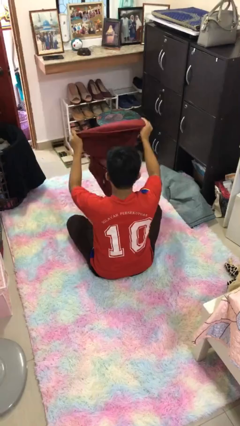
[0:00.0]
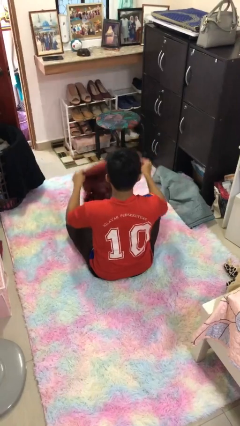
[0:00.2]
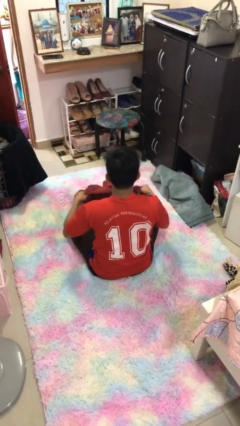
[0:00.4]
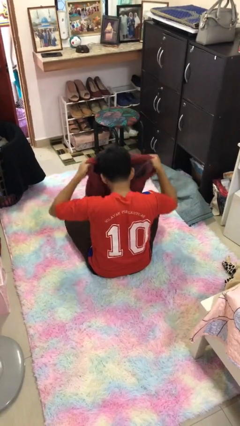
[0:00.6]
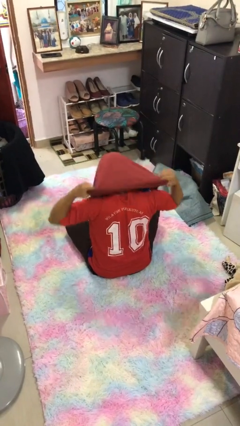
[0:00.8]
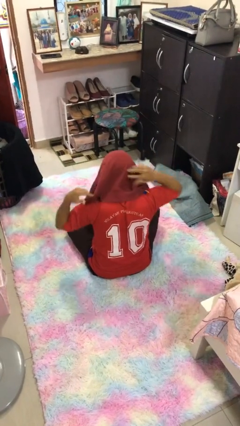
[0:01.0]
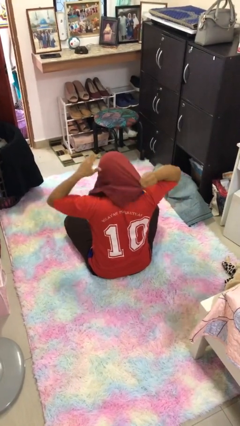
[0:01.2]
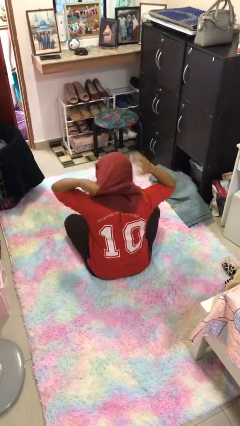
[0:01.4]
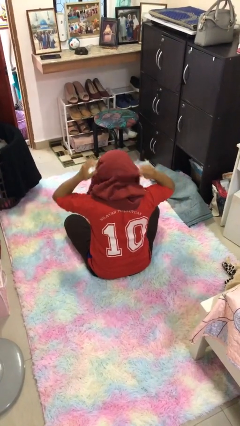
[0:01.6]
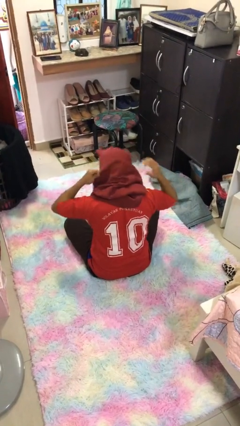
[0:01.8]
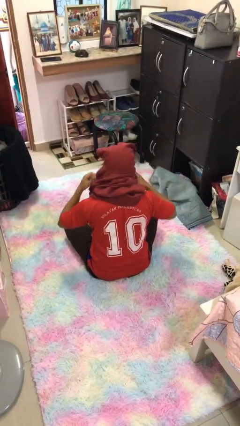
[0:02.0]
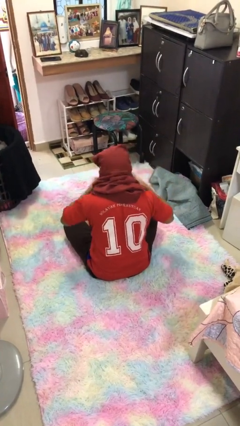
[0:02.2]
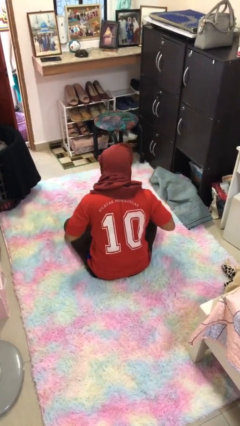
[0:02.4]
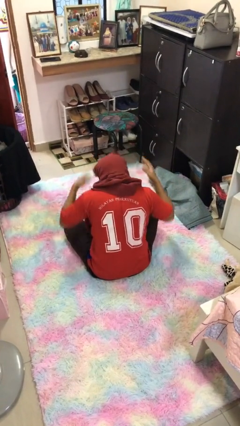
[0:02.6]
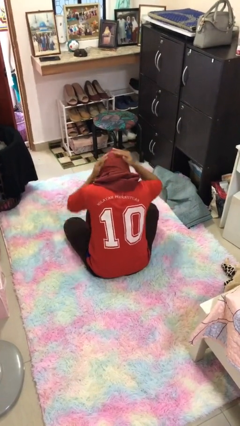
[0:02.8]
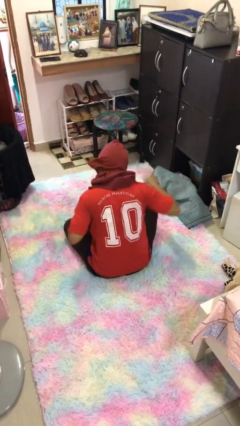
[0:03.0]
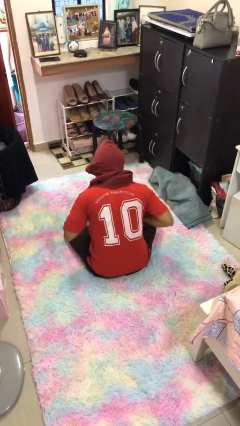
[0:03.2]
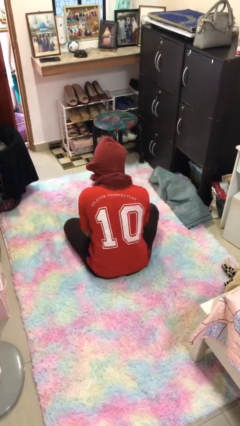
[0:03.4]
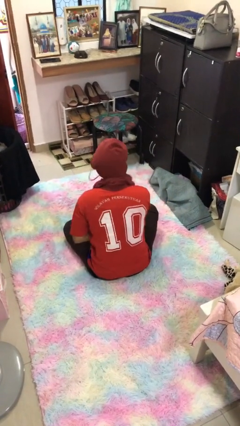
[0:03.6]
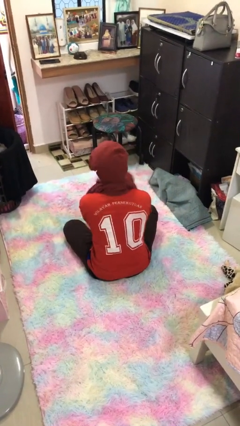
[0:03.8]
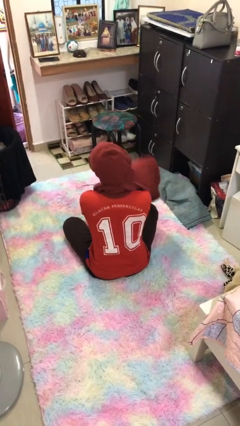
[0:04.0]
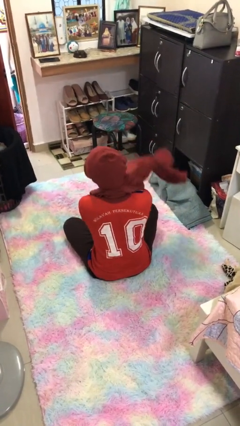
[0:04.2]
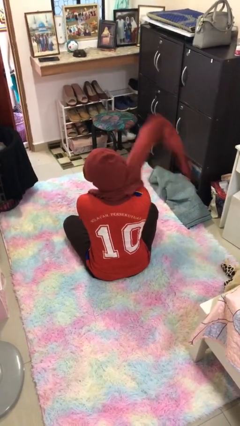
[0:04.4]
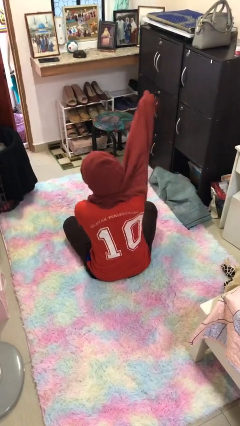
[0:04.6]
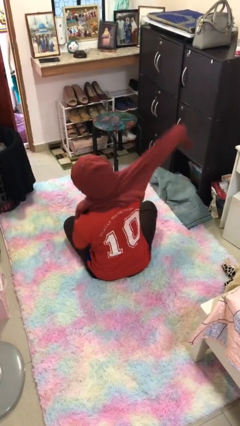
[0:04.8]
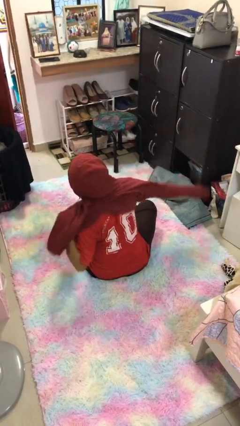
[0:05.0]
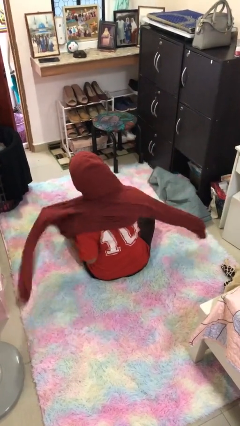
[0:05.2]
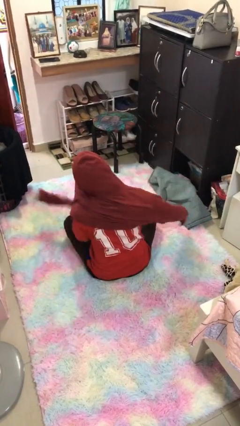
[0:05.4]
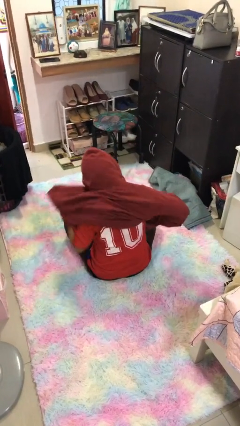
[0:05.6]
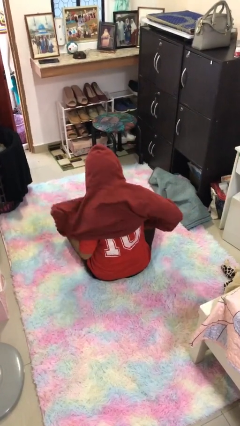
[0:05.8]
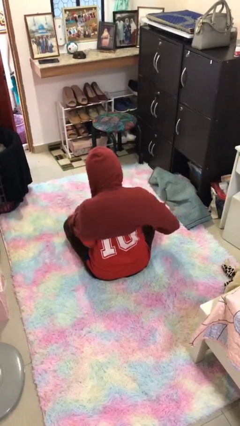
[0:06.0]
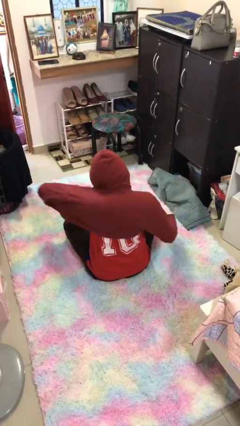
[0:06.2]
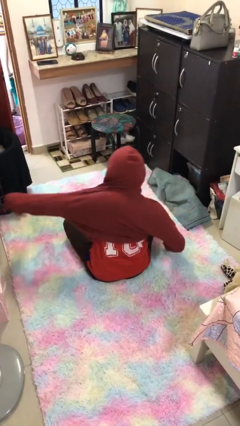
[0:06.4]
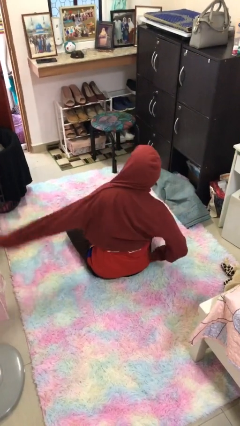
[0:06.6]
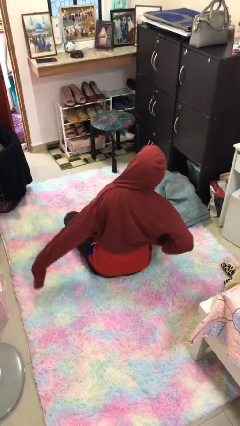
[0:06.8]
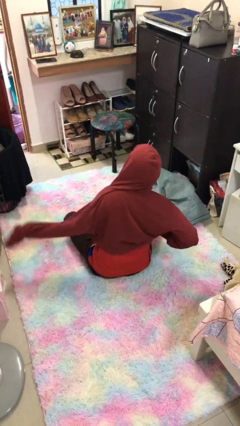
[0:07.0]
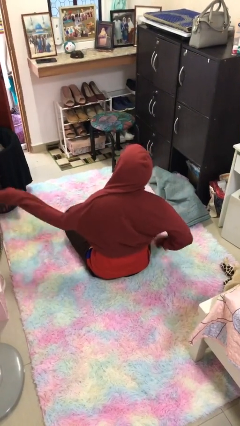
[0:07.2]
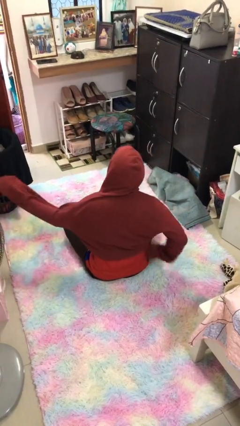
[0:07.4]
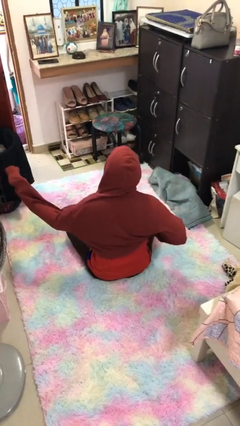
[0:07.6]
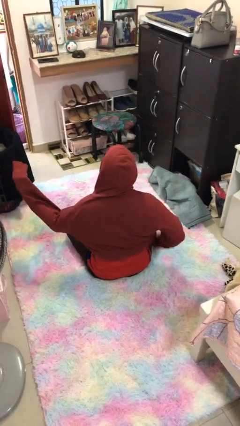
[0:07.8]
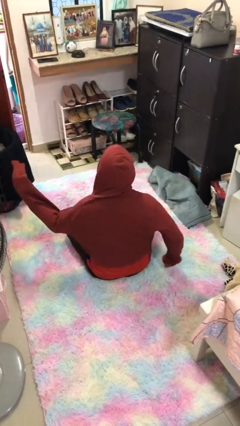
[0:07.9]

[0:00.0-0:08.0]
person puts on hoodie

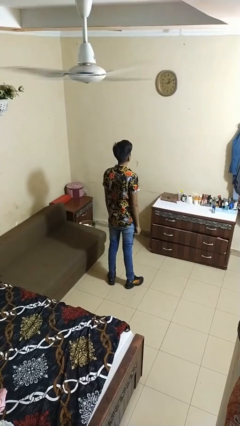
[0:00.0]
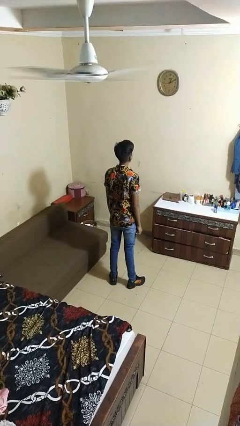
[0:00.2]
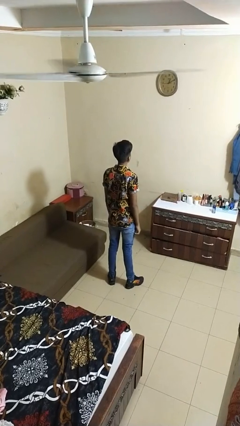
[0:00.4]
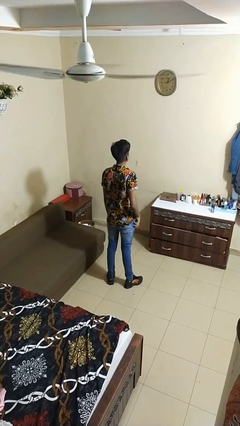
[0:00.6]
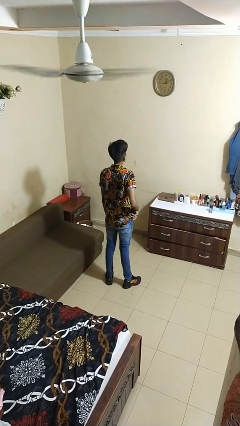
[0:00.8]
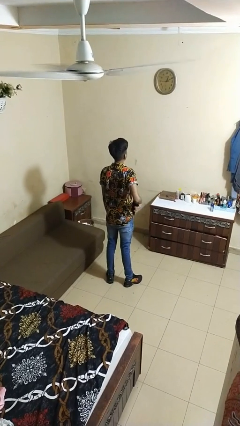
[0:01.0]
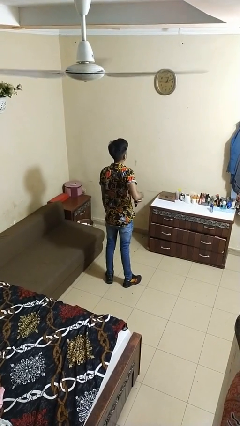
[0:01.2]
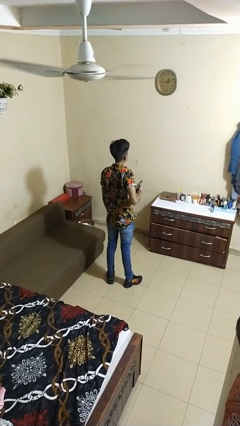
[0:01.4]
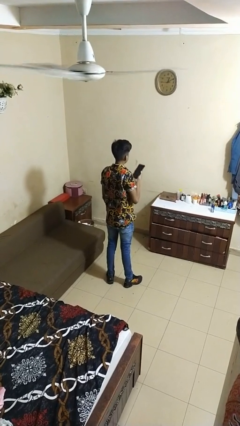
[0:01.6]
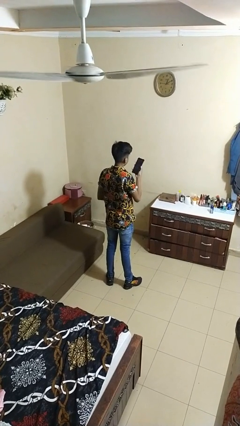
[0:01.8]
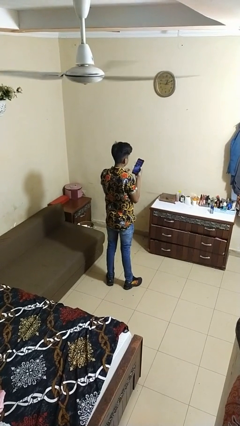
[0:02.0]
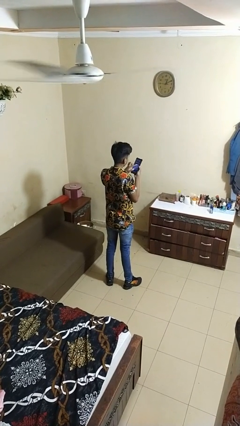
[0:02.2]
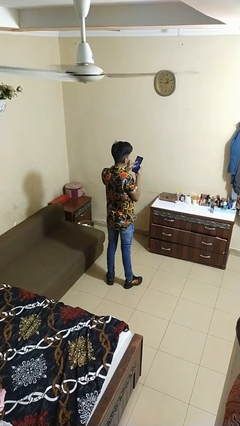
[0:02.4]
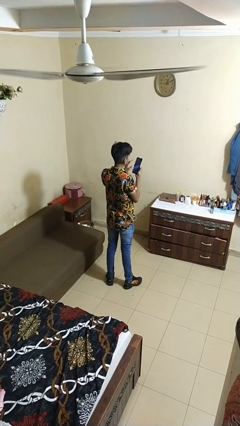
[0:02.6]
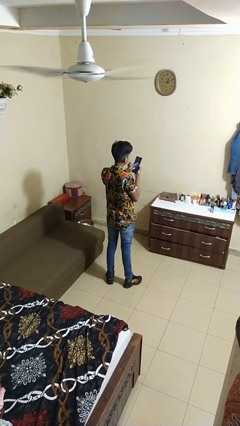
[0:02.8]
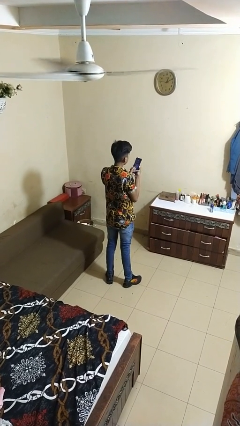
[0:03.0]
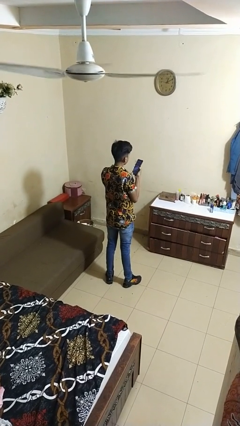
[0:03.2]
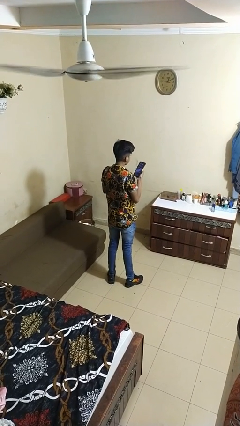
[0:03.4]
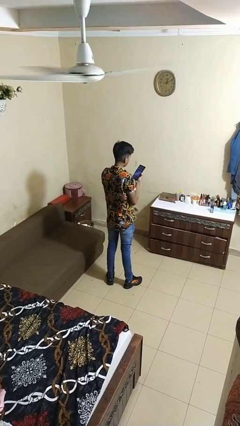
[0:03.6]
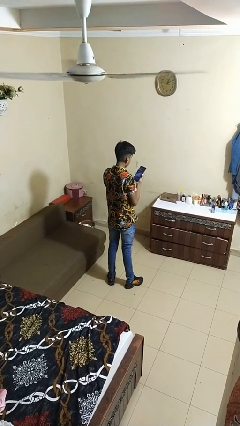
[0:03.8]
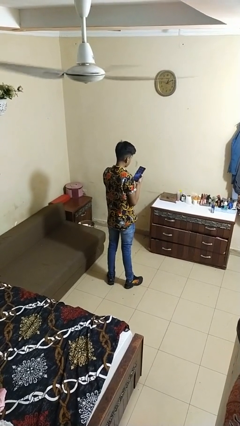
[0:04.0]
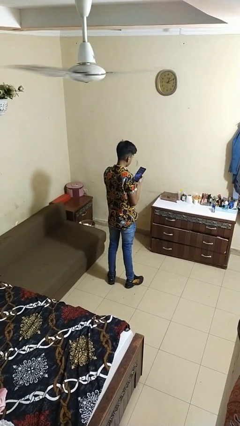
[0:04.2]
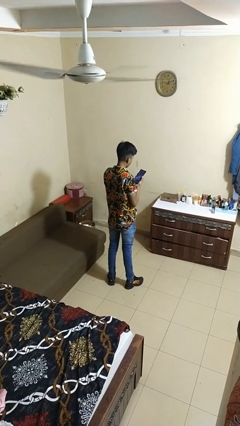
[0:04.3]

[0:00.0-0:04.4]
person takes phone from pocket

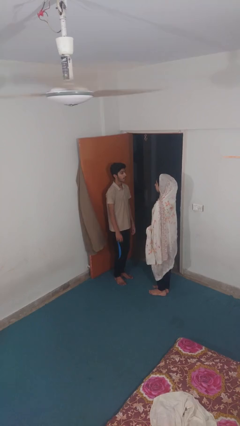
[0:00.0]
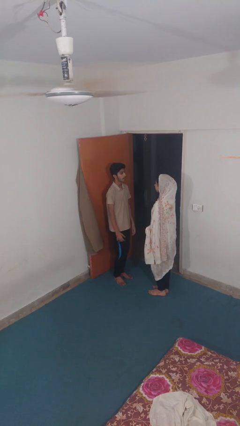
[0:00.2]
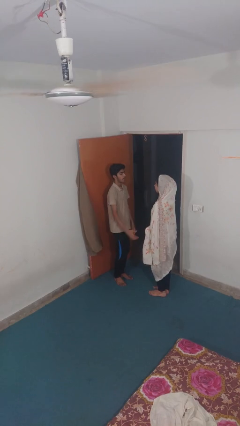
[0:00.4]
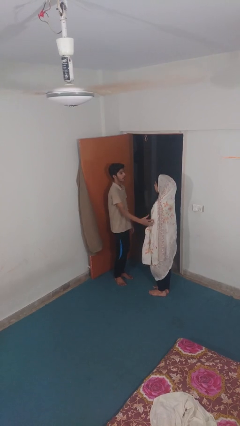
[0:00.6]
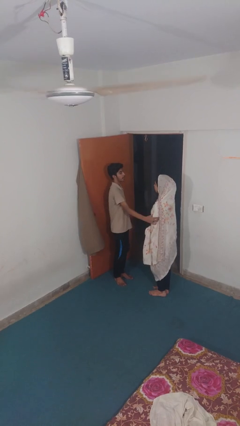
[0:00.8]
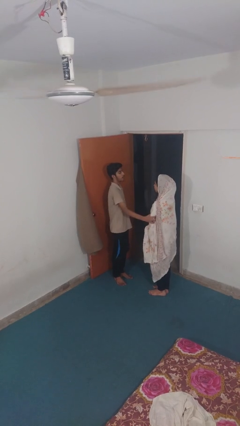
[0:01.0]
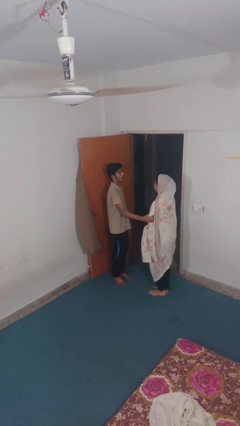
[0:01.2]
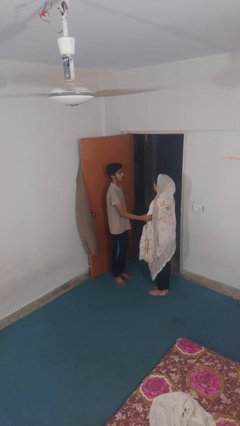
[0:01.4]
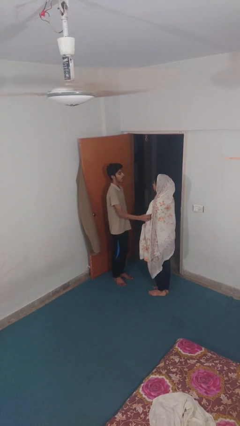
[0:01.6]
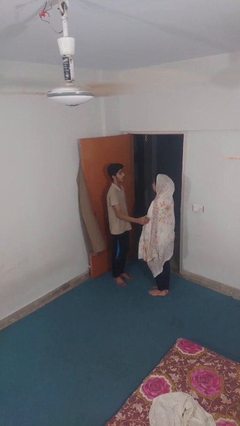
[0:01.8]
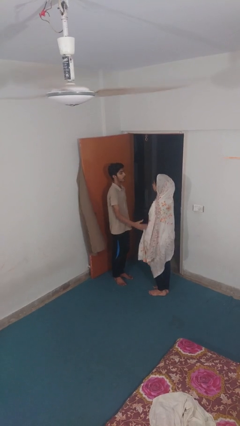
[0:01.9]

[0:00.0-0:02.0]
person grabs person by bicep

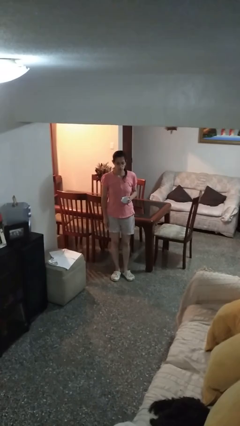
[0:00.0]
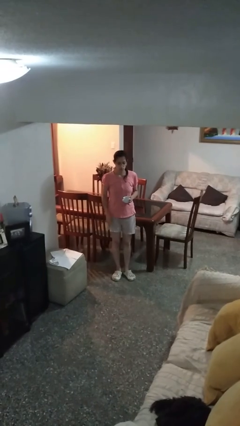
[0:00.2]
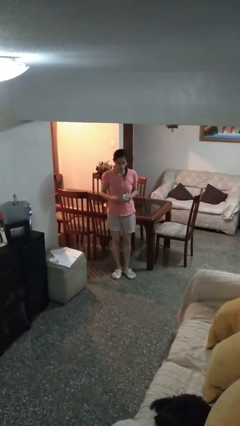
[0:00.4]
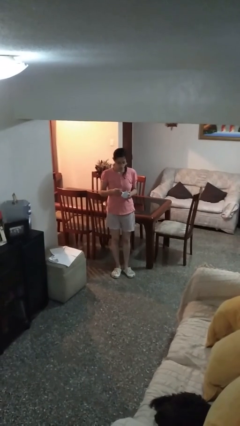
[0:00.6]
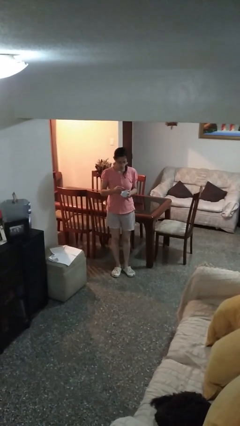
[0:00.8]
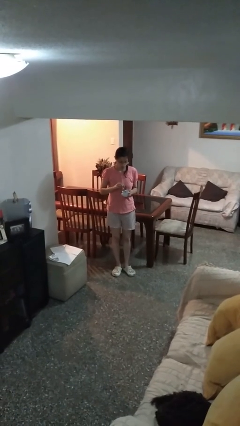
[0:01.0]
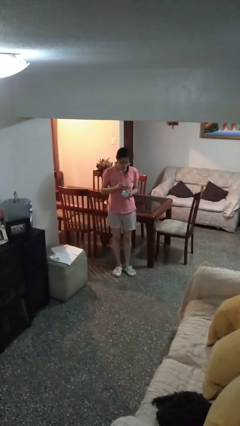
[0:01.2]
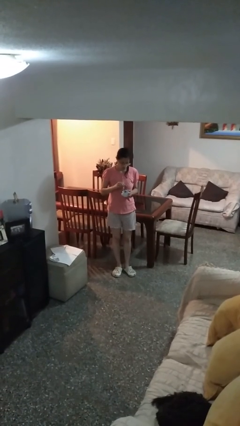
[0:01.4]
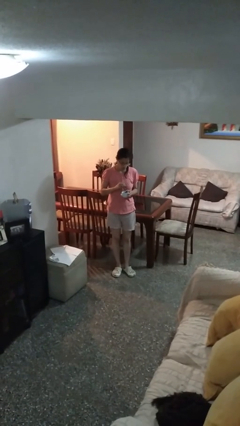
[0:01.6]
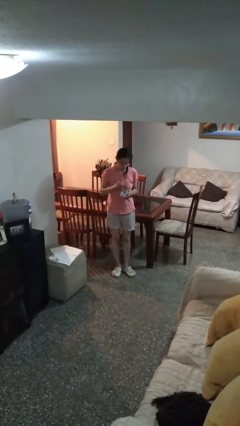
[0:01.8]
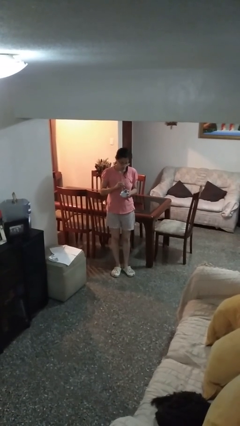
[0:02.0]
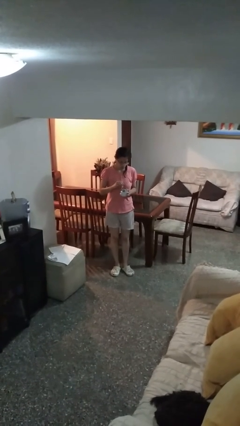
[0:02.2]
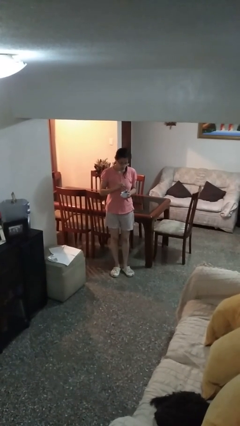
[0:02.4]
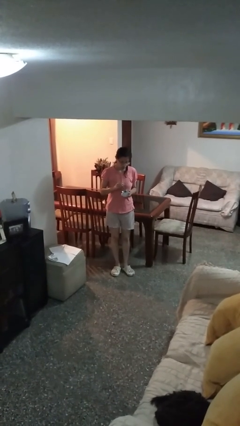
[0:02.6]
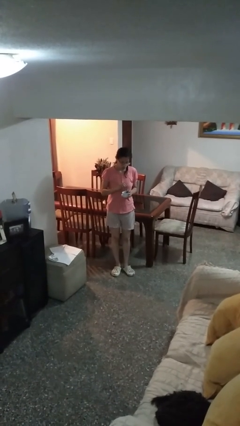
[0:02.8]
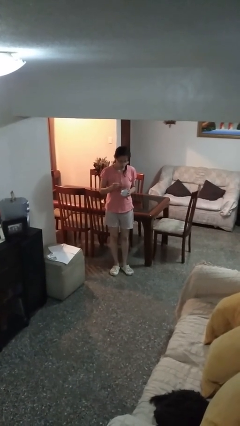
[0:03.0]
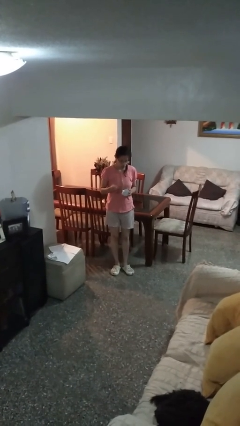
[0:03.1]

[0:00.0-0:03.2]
person stirs mug

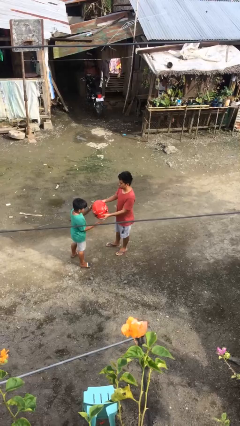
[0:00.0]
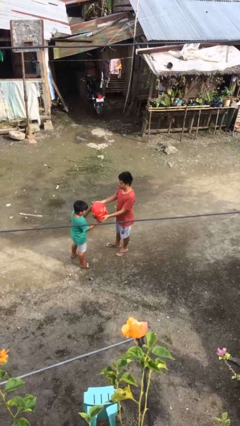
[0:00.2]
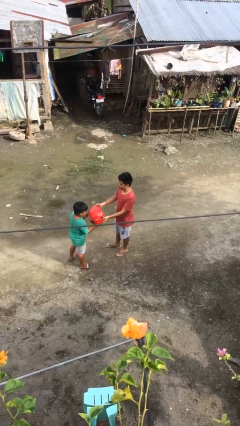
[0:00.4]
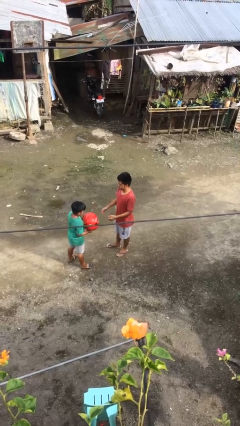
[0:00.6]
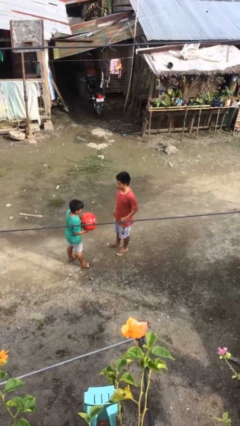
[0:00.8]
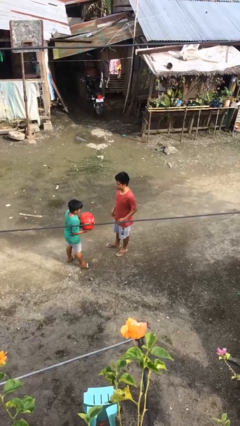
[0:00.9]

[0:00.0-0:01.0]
person transfers object to person
